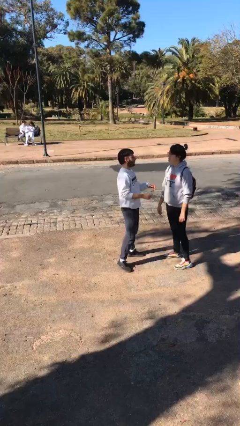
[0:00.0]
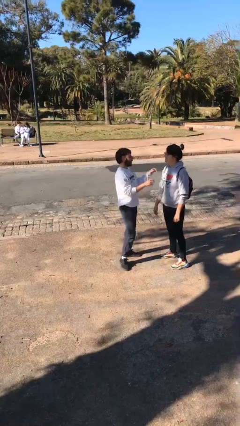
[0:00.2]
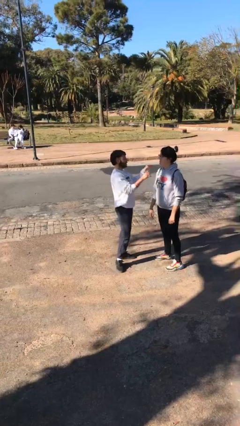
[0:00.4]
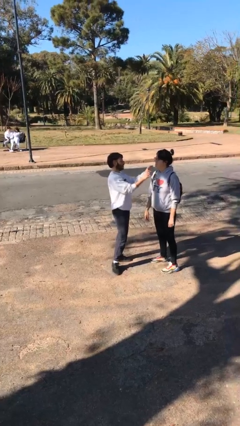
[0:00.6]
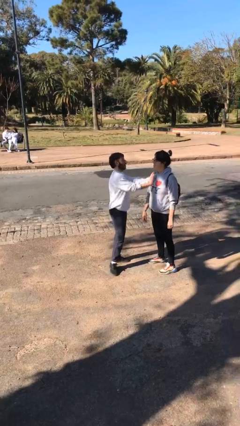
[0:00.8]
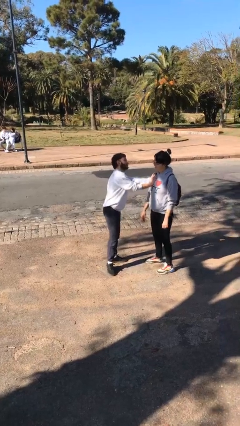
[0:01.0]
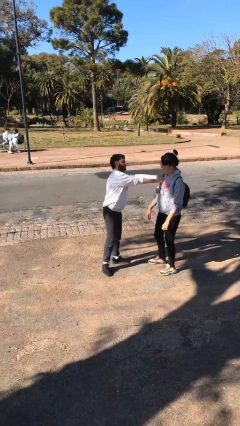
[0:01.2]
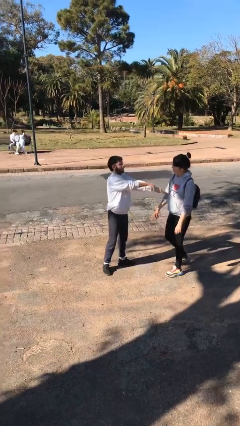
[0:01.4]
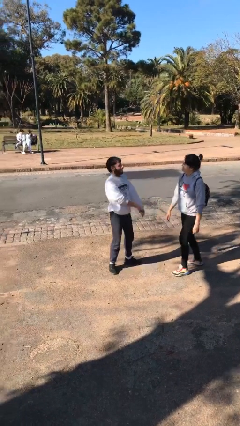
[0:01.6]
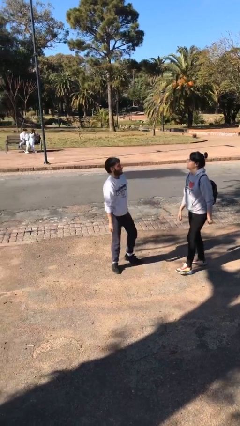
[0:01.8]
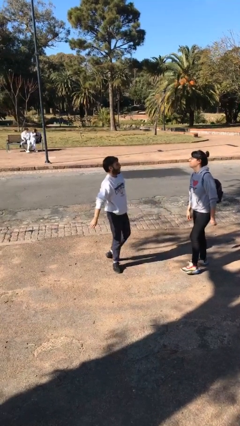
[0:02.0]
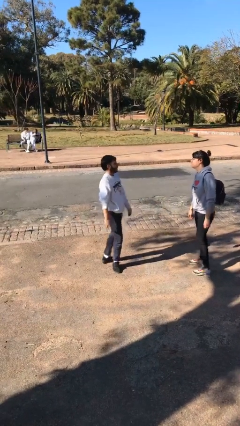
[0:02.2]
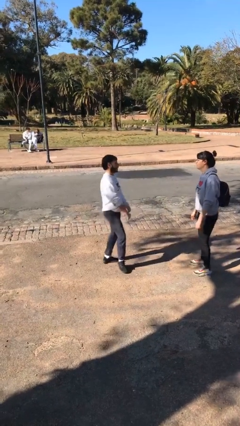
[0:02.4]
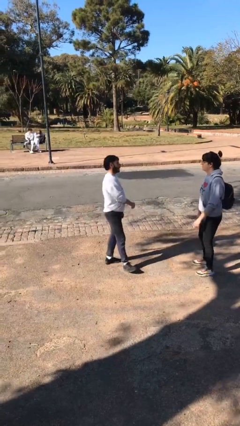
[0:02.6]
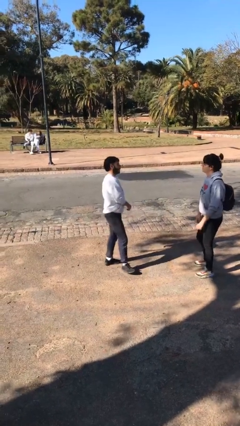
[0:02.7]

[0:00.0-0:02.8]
person shoves person

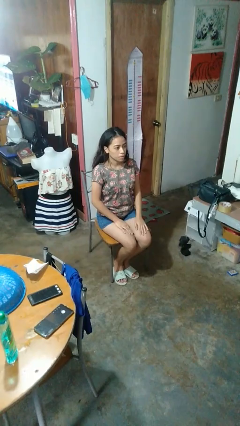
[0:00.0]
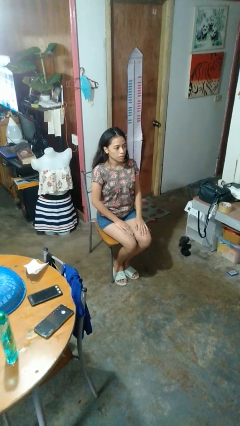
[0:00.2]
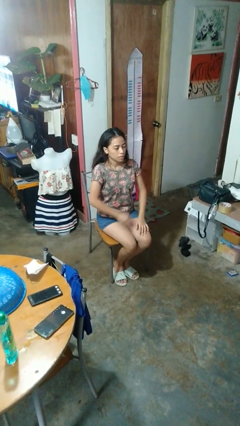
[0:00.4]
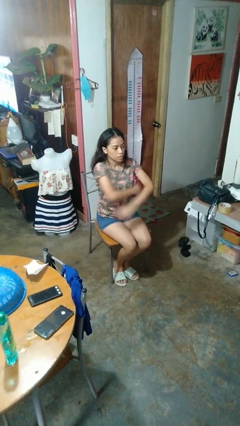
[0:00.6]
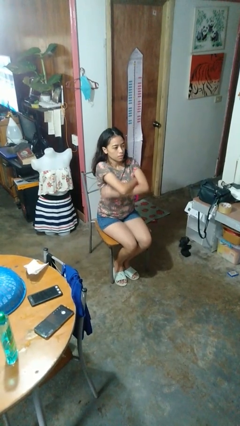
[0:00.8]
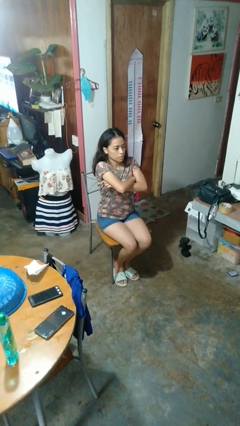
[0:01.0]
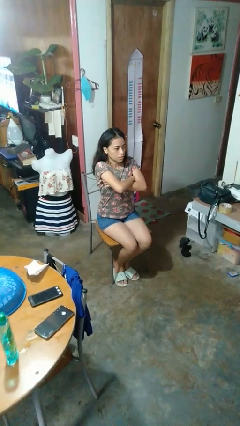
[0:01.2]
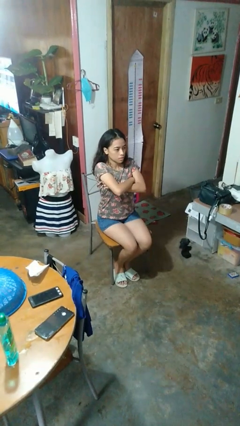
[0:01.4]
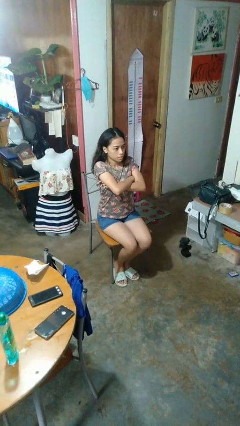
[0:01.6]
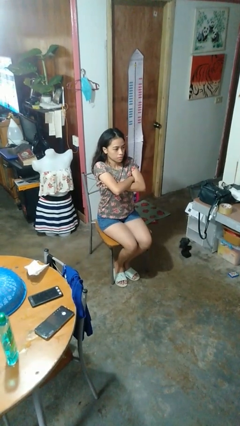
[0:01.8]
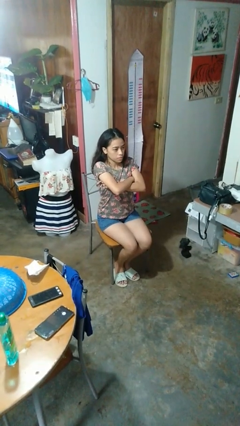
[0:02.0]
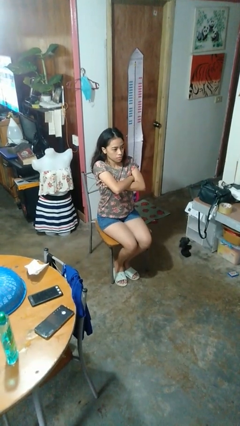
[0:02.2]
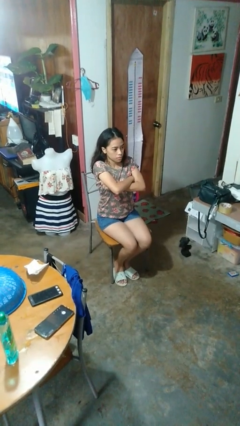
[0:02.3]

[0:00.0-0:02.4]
person crosses arms

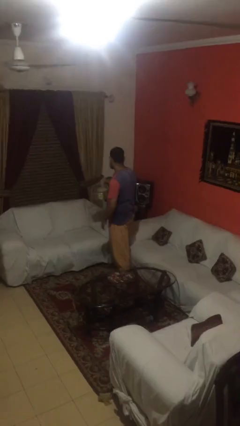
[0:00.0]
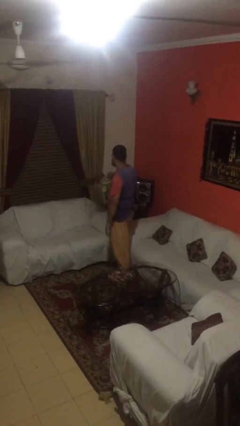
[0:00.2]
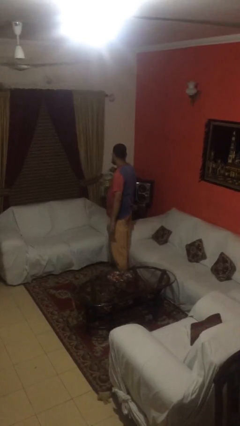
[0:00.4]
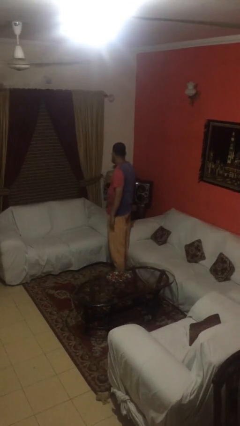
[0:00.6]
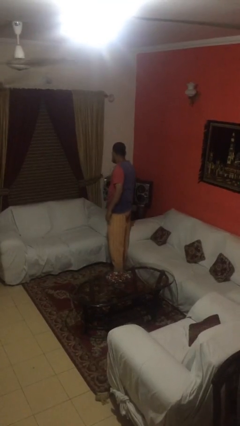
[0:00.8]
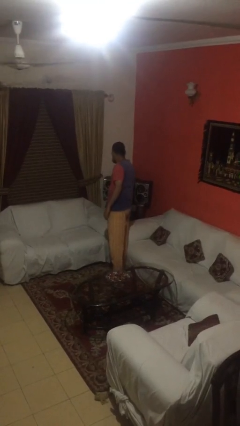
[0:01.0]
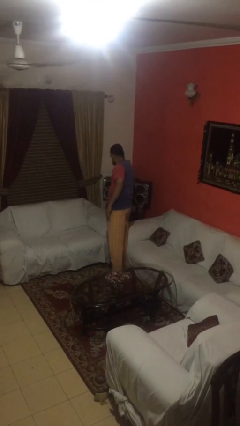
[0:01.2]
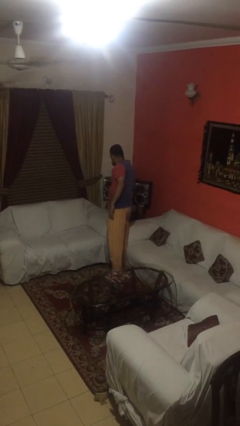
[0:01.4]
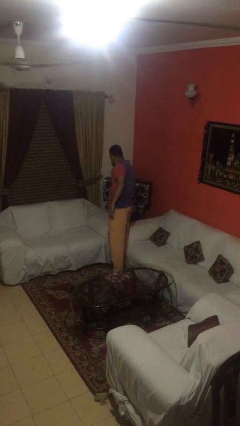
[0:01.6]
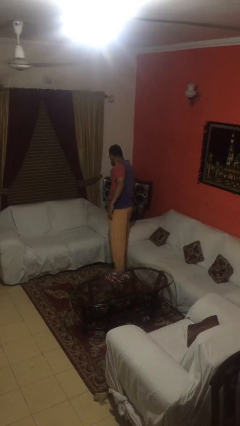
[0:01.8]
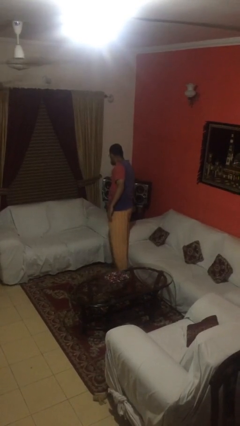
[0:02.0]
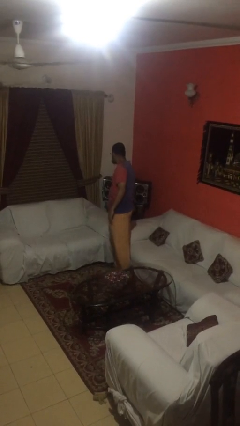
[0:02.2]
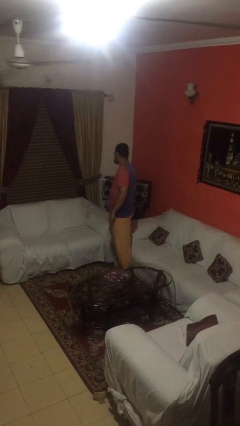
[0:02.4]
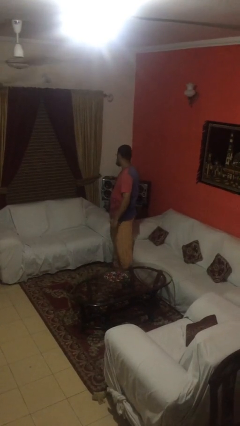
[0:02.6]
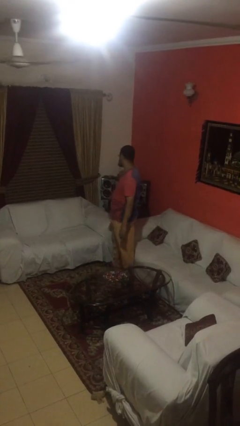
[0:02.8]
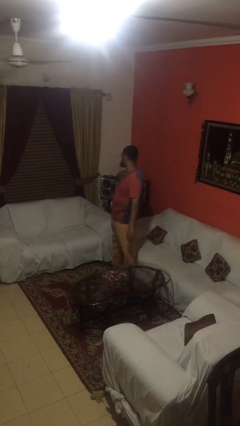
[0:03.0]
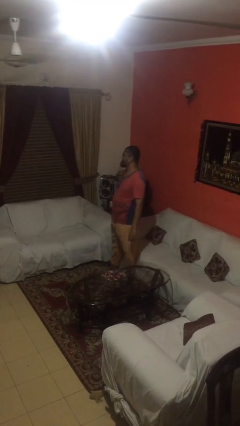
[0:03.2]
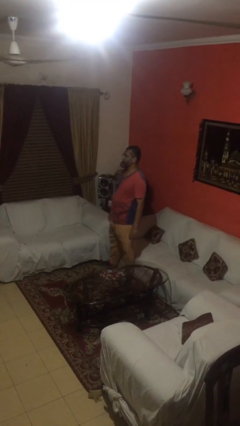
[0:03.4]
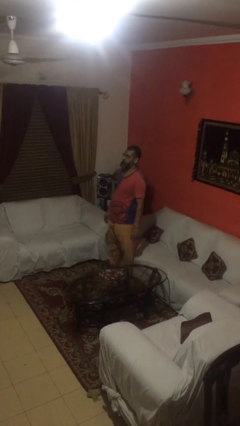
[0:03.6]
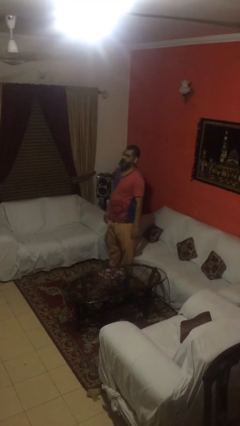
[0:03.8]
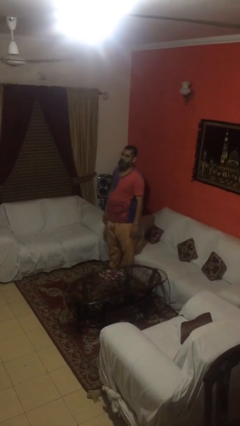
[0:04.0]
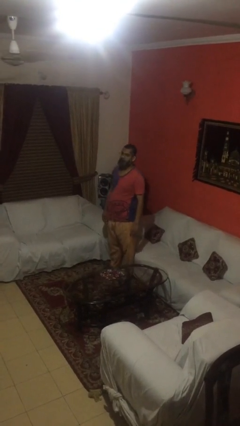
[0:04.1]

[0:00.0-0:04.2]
person puts down object on shelf

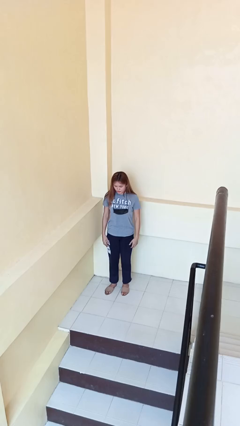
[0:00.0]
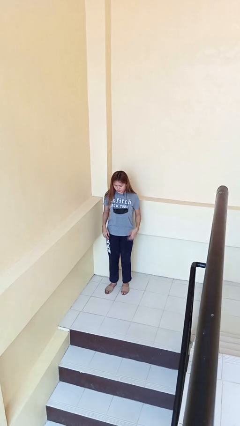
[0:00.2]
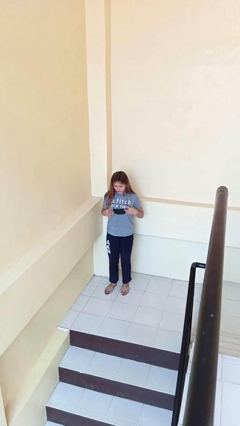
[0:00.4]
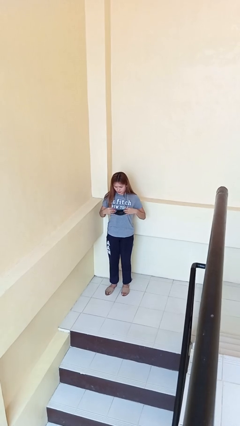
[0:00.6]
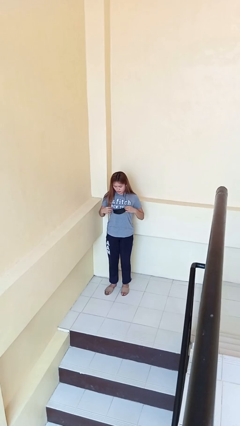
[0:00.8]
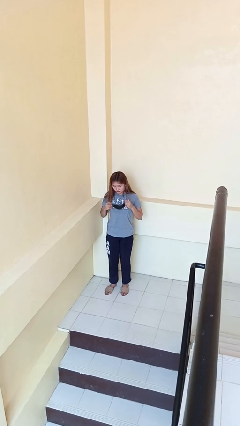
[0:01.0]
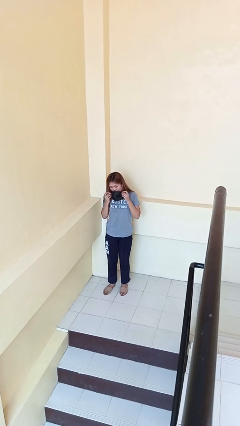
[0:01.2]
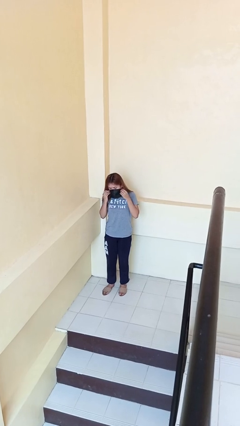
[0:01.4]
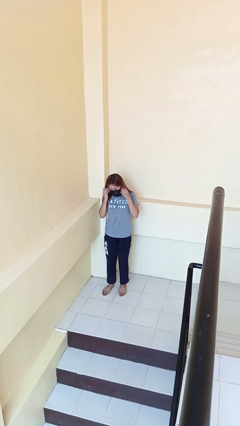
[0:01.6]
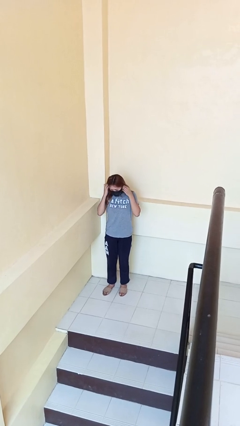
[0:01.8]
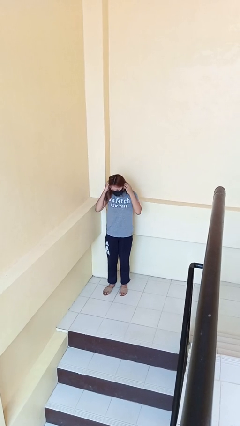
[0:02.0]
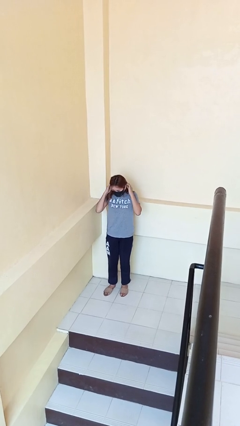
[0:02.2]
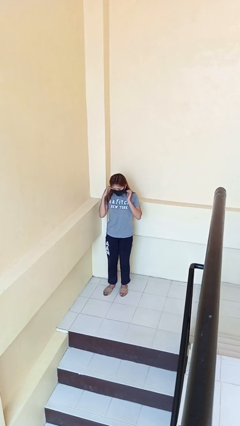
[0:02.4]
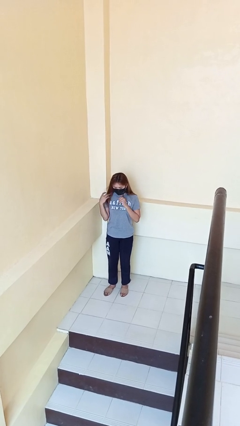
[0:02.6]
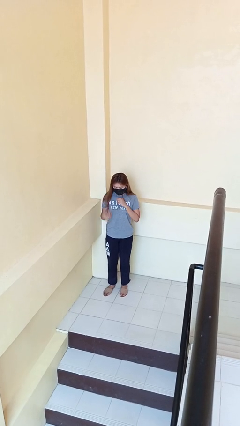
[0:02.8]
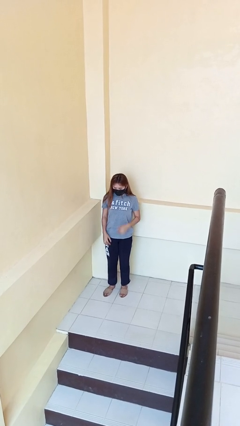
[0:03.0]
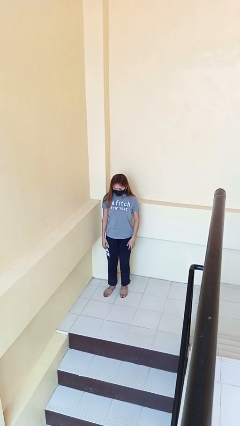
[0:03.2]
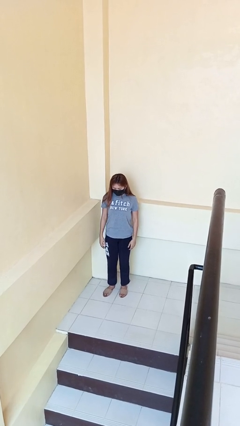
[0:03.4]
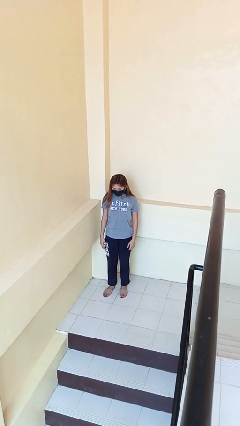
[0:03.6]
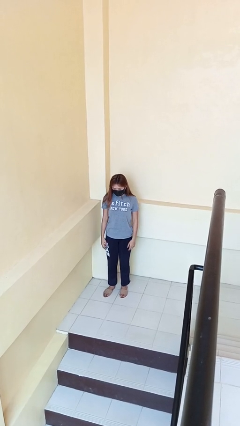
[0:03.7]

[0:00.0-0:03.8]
person puts on facemask

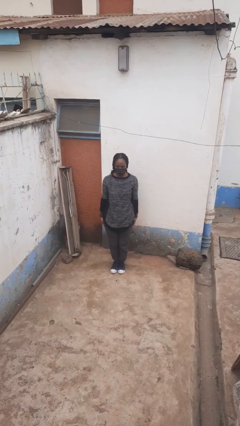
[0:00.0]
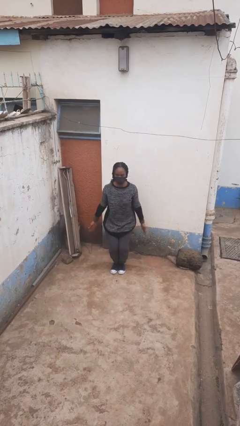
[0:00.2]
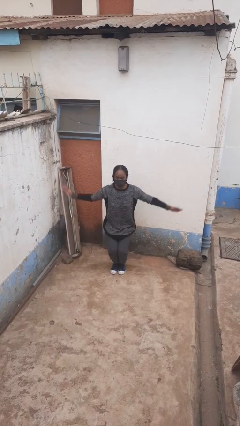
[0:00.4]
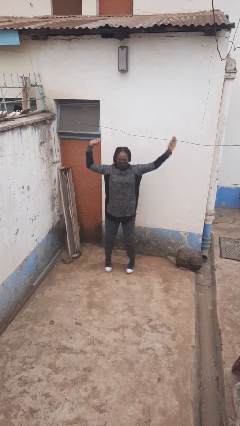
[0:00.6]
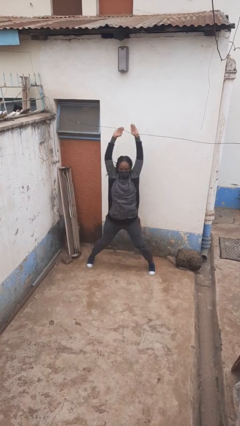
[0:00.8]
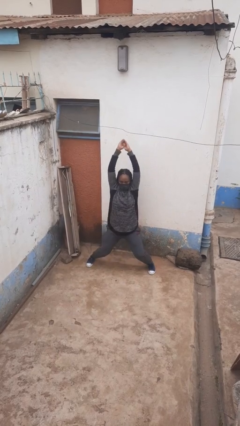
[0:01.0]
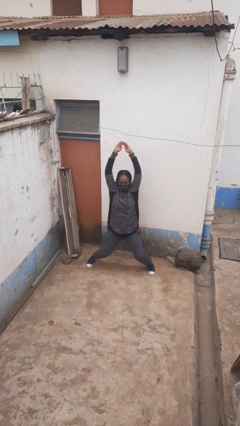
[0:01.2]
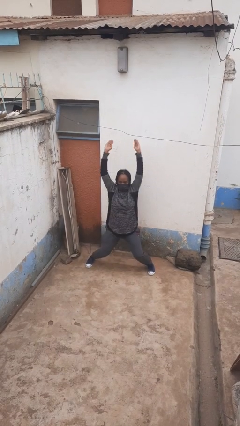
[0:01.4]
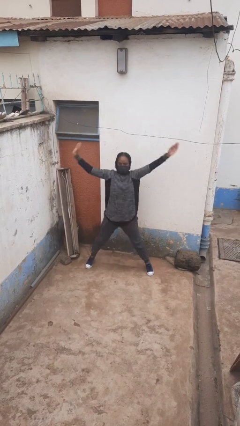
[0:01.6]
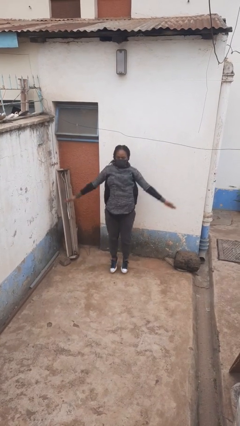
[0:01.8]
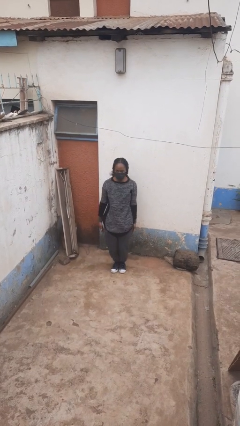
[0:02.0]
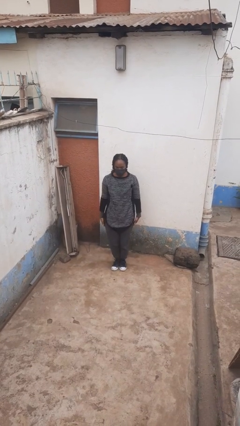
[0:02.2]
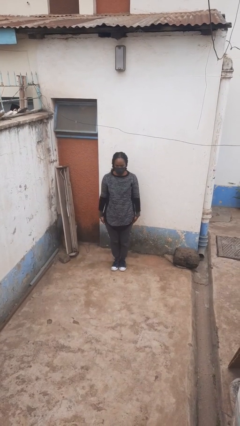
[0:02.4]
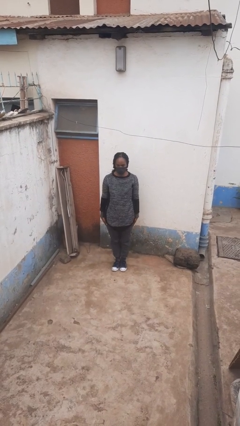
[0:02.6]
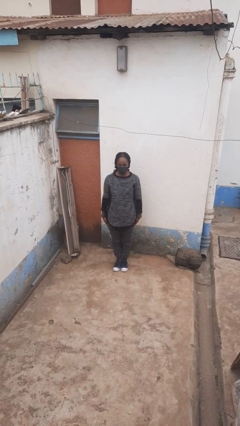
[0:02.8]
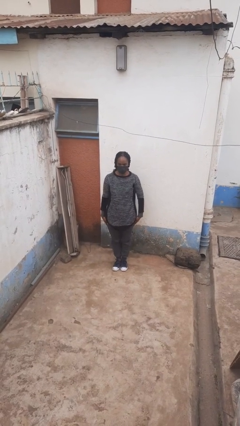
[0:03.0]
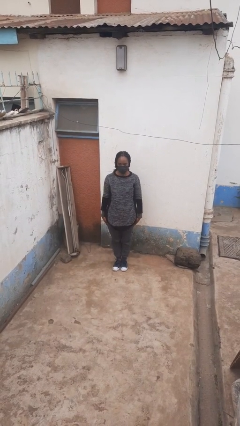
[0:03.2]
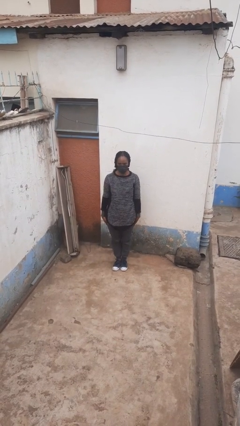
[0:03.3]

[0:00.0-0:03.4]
person exercises with jumping jacks

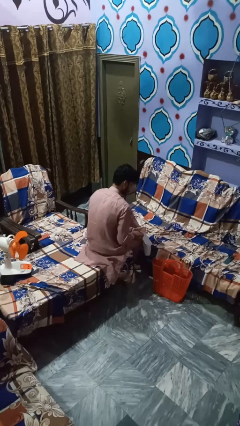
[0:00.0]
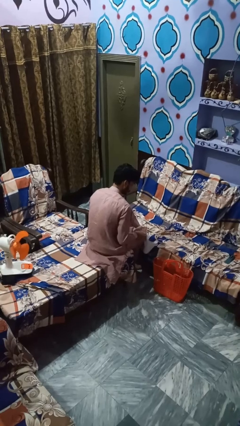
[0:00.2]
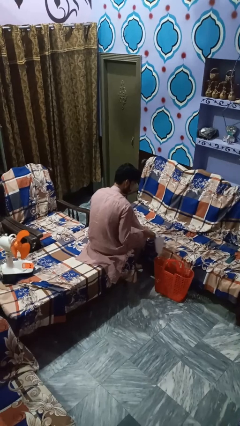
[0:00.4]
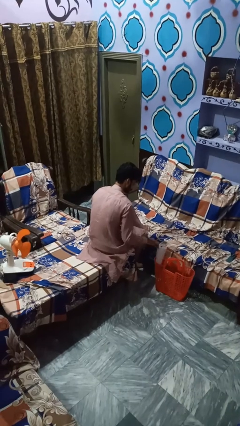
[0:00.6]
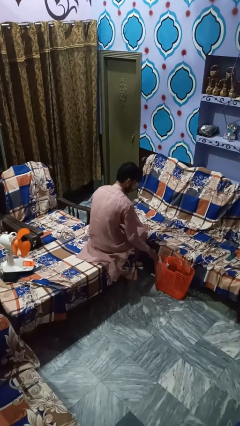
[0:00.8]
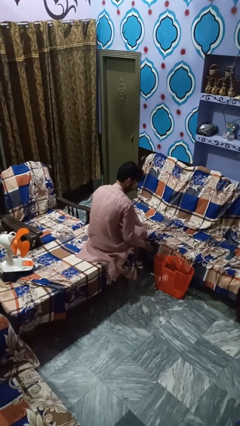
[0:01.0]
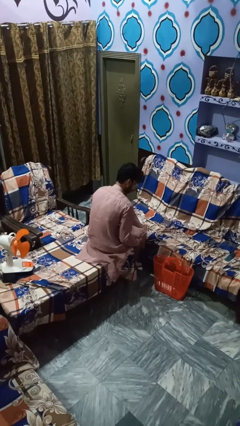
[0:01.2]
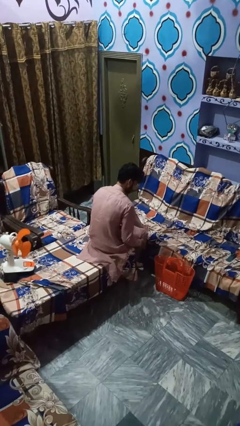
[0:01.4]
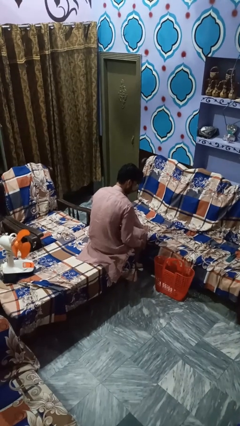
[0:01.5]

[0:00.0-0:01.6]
person discards trash
